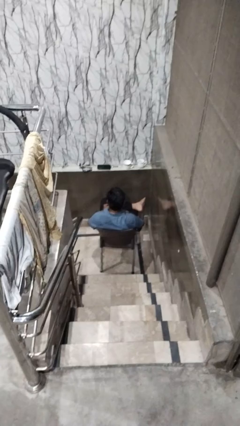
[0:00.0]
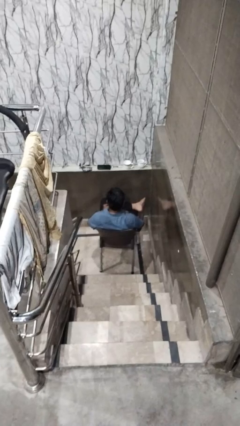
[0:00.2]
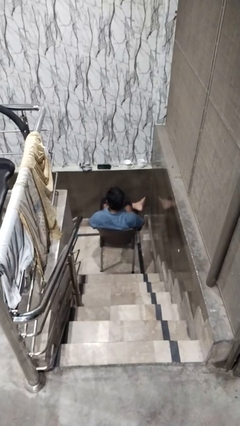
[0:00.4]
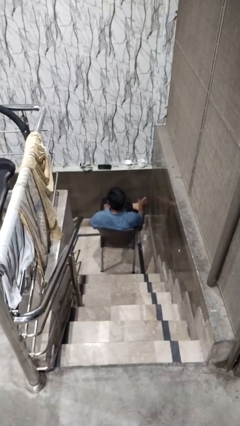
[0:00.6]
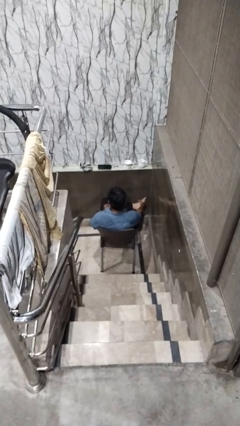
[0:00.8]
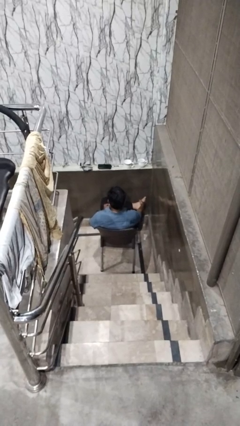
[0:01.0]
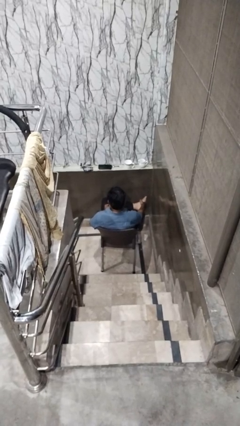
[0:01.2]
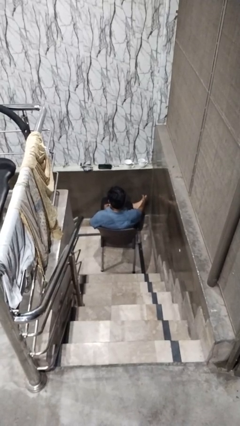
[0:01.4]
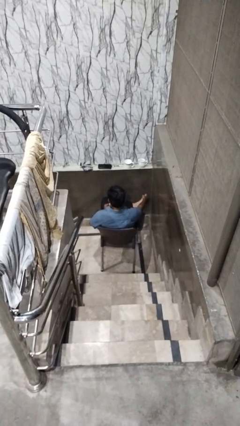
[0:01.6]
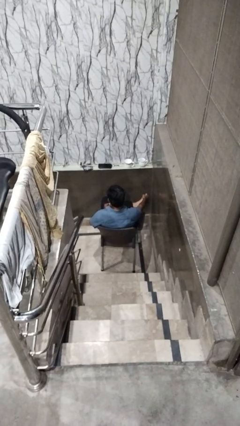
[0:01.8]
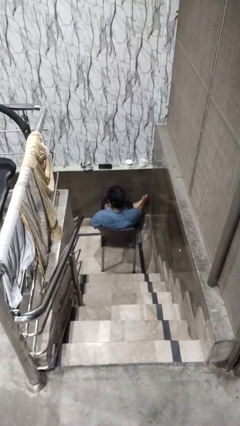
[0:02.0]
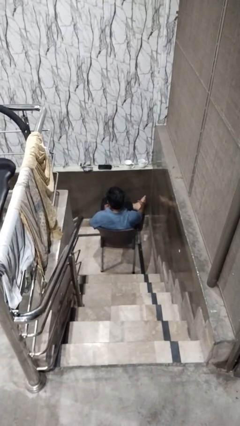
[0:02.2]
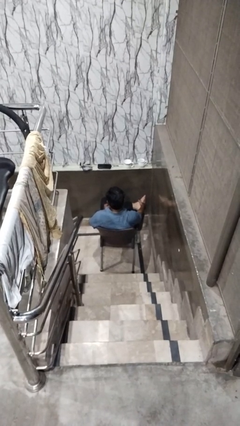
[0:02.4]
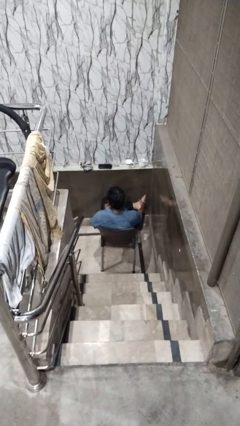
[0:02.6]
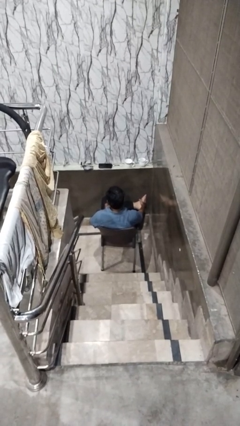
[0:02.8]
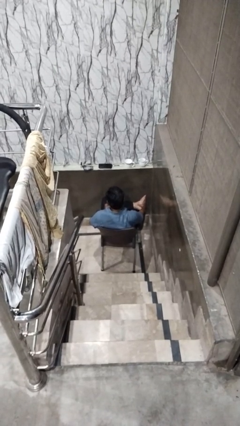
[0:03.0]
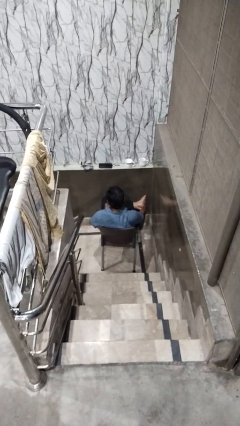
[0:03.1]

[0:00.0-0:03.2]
person rubs foot

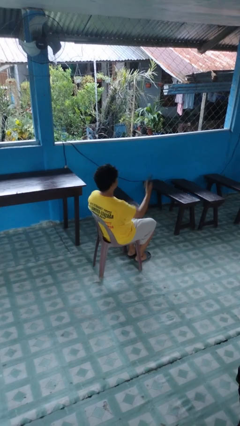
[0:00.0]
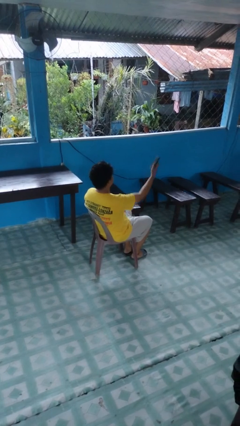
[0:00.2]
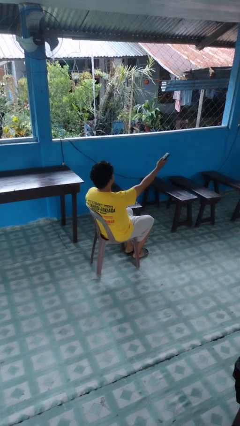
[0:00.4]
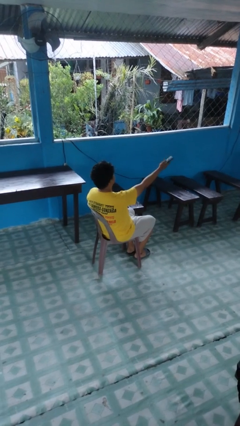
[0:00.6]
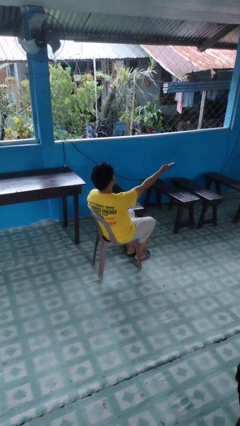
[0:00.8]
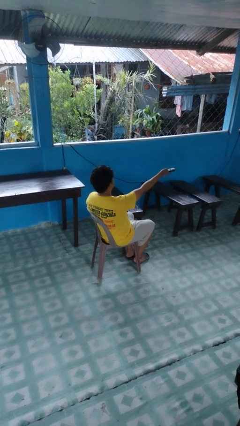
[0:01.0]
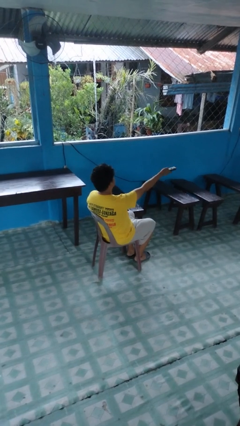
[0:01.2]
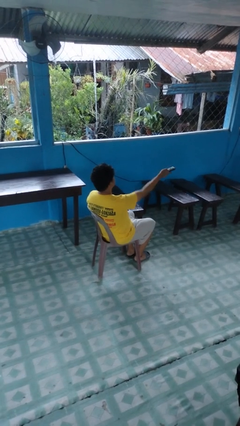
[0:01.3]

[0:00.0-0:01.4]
person uses television remote

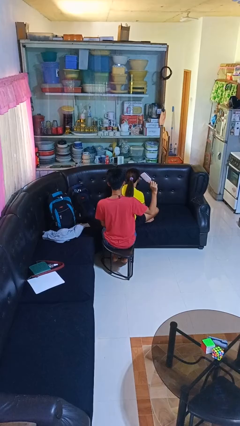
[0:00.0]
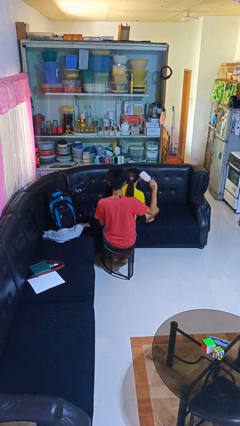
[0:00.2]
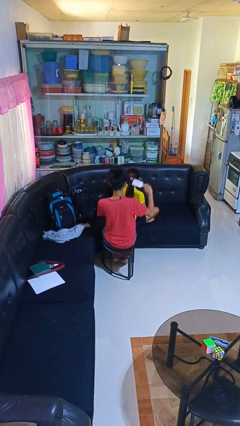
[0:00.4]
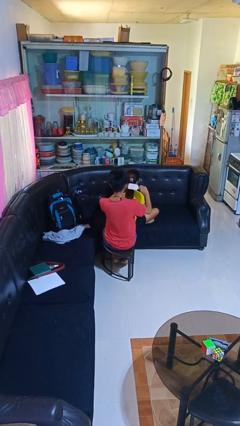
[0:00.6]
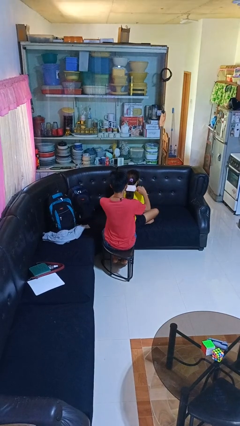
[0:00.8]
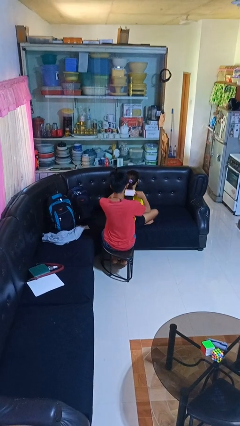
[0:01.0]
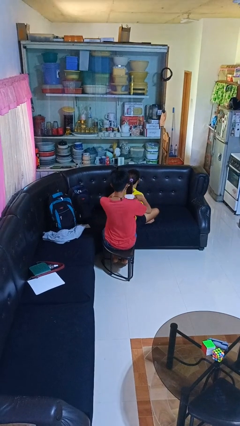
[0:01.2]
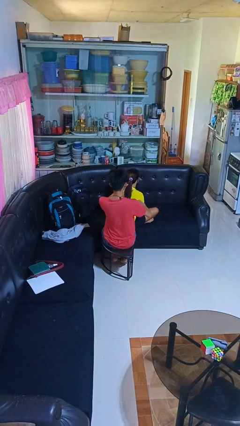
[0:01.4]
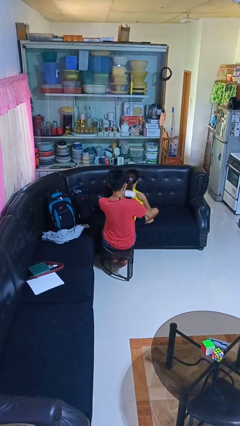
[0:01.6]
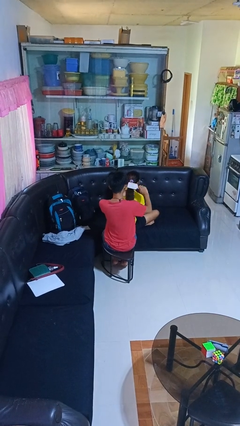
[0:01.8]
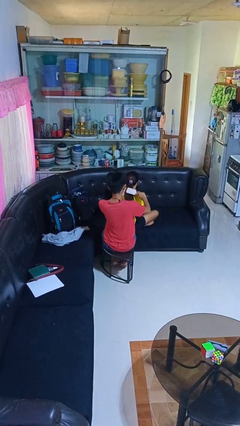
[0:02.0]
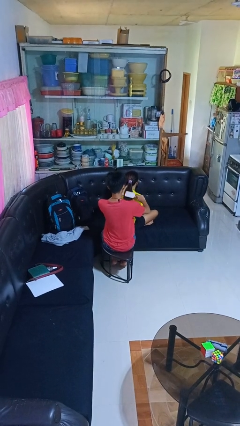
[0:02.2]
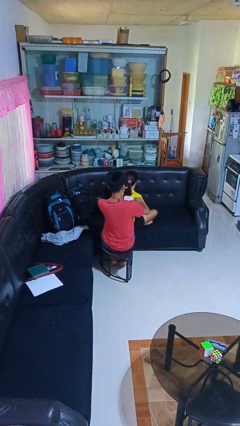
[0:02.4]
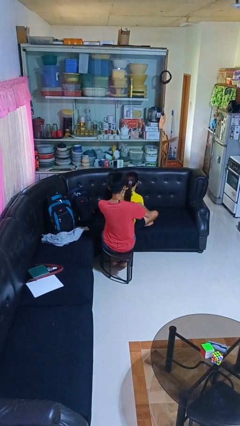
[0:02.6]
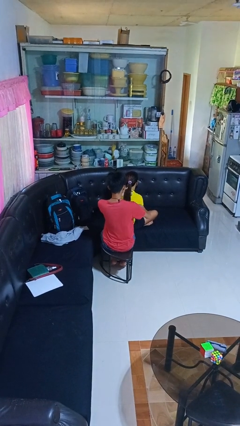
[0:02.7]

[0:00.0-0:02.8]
person brushes hair of person

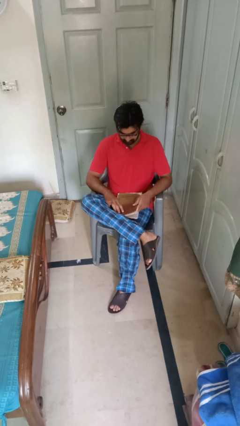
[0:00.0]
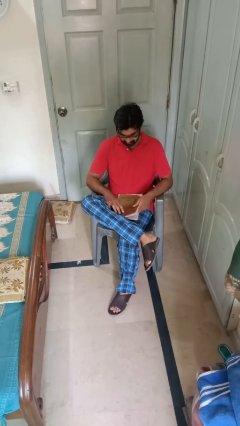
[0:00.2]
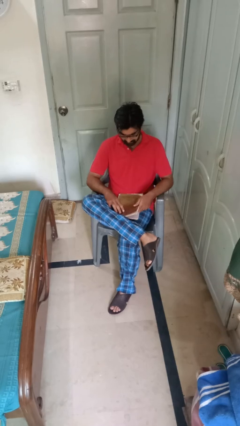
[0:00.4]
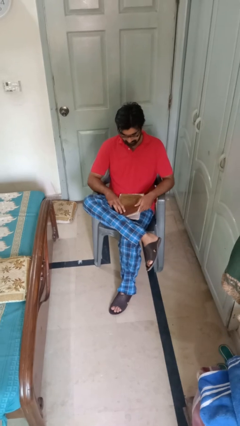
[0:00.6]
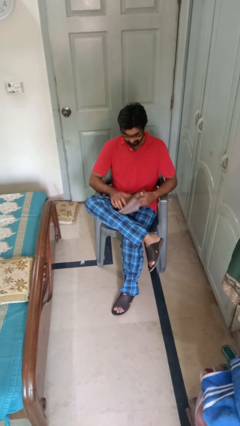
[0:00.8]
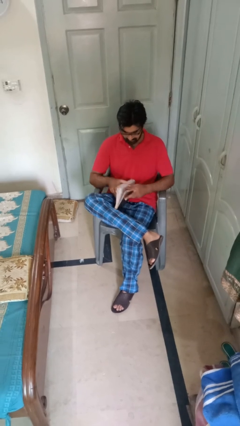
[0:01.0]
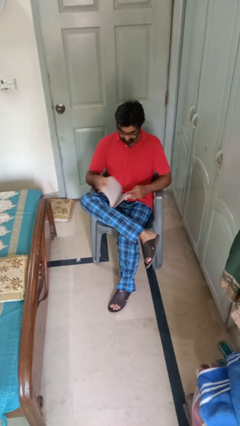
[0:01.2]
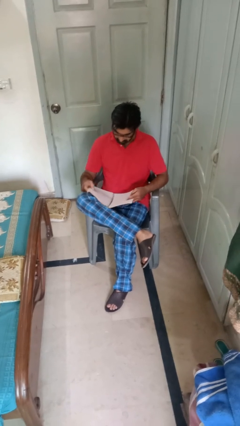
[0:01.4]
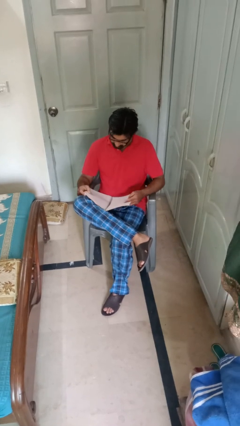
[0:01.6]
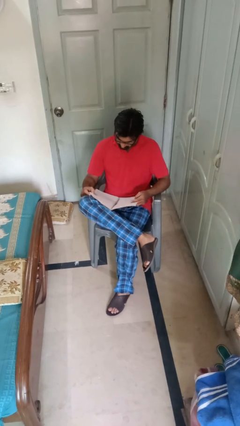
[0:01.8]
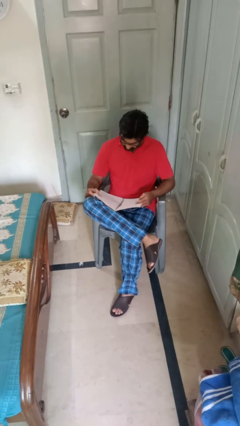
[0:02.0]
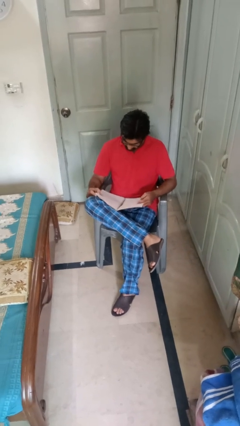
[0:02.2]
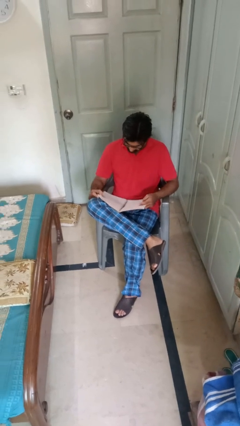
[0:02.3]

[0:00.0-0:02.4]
person reads magazine

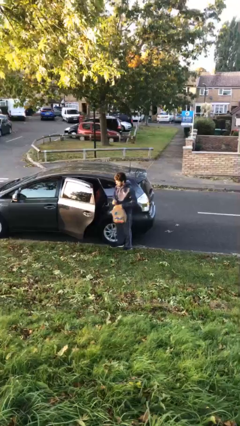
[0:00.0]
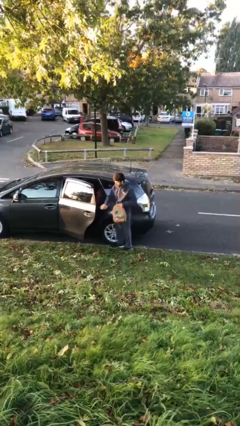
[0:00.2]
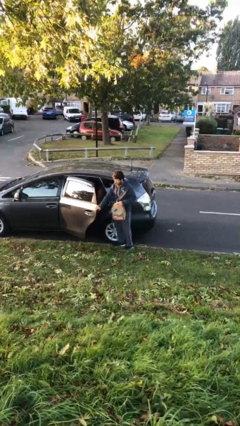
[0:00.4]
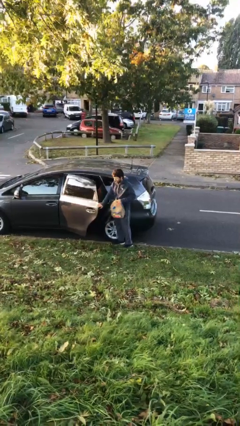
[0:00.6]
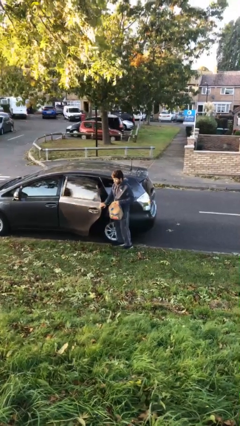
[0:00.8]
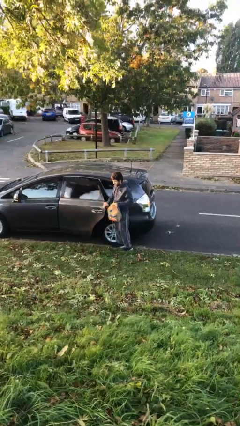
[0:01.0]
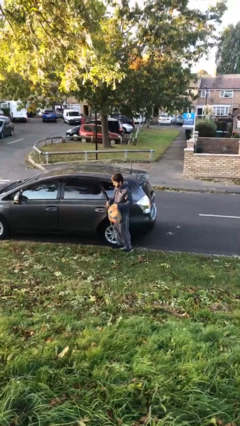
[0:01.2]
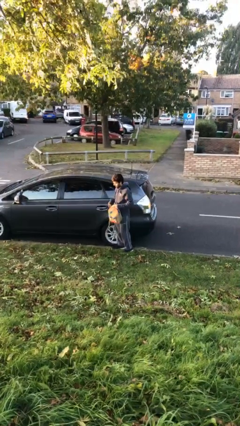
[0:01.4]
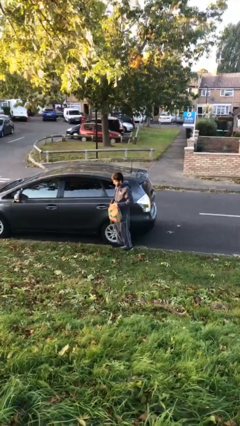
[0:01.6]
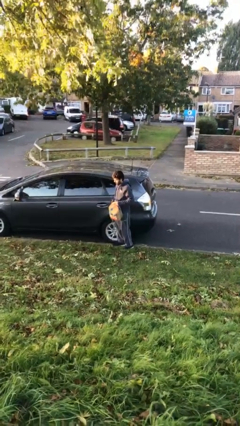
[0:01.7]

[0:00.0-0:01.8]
person closes car door

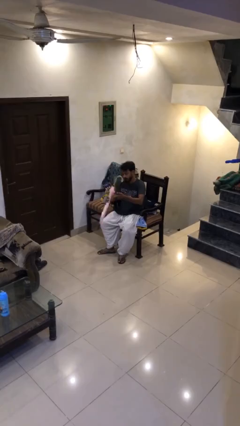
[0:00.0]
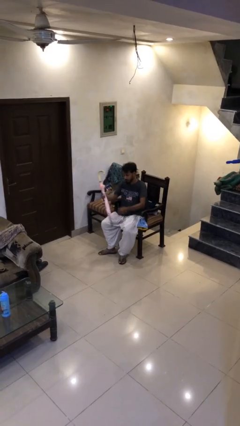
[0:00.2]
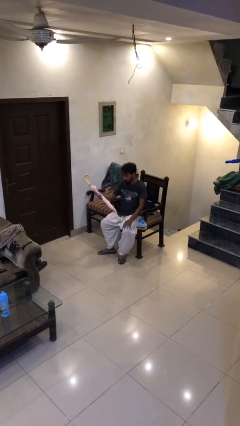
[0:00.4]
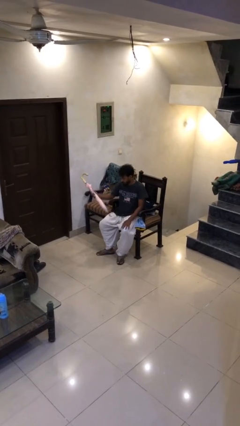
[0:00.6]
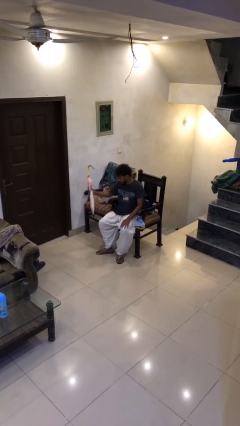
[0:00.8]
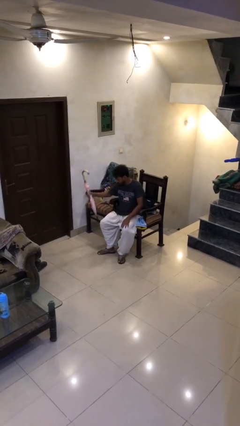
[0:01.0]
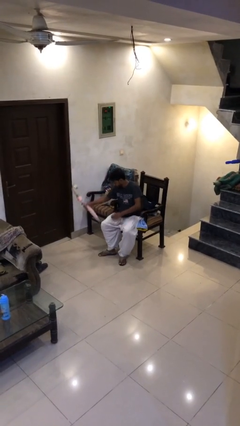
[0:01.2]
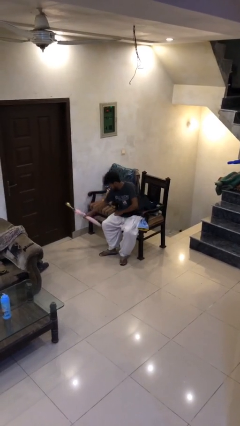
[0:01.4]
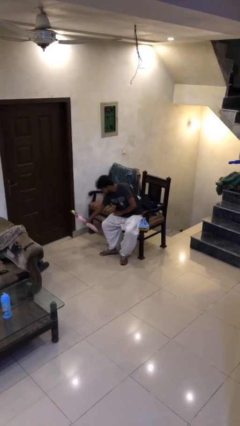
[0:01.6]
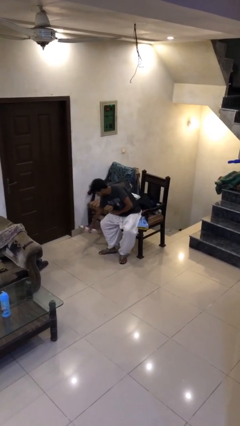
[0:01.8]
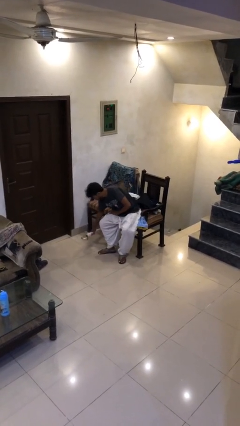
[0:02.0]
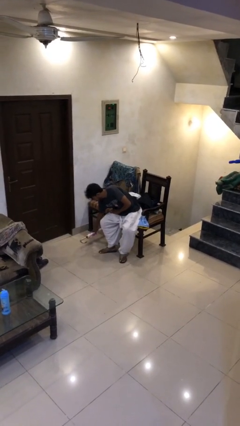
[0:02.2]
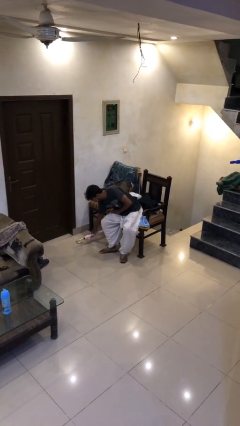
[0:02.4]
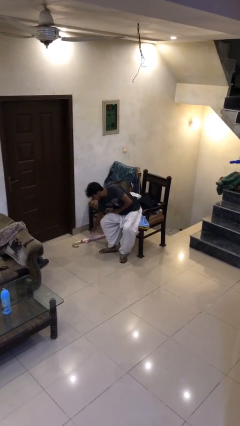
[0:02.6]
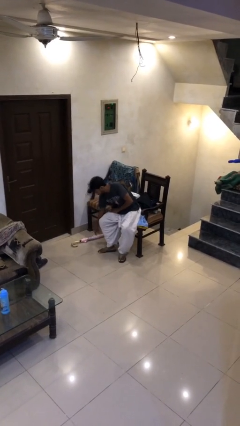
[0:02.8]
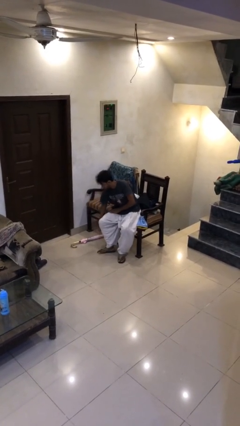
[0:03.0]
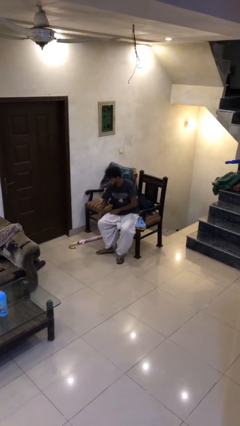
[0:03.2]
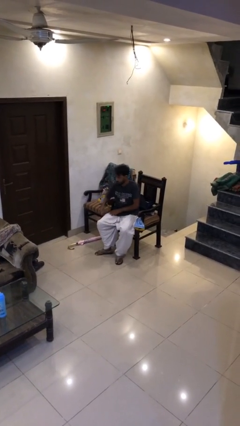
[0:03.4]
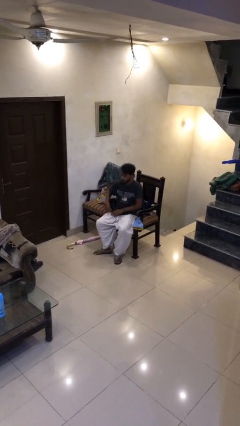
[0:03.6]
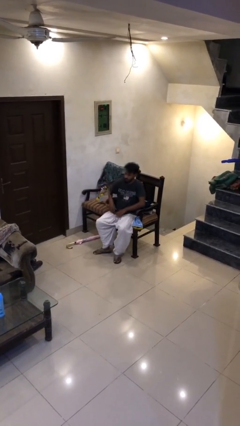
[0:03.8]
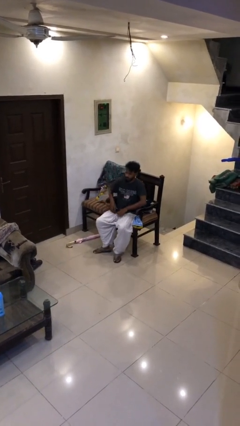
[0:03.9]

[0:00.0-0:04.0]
person puts down object on floor

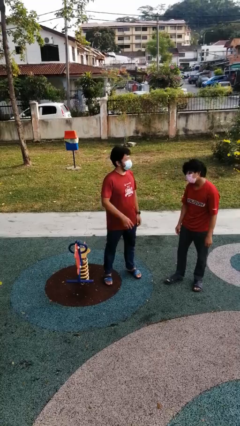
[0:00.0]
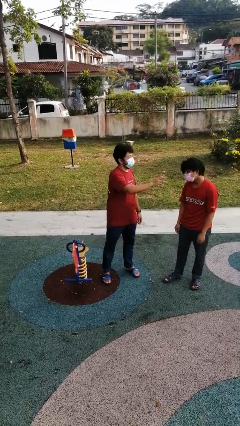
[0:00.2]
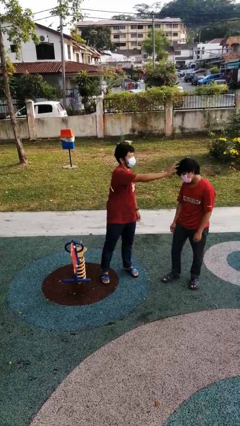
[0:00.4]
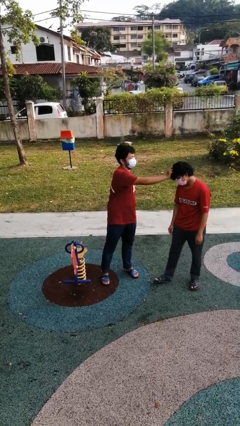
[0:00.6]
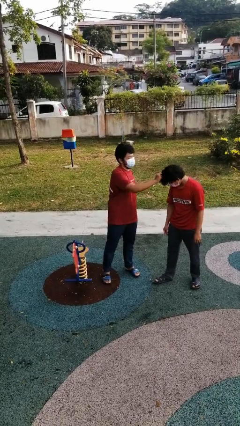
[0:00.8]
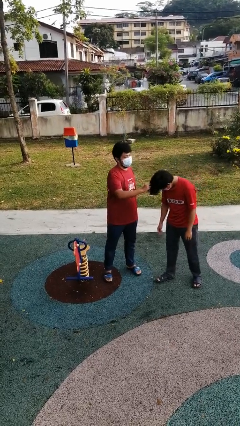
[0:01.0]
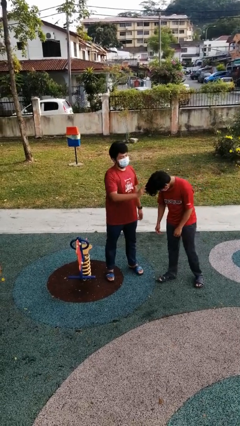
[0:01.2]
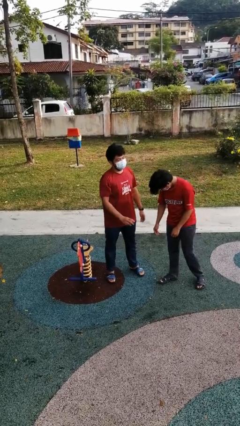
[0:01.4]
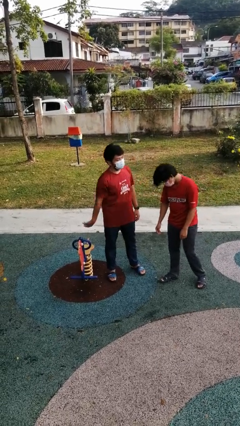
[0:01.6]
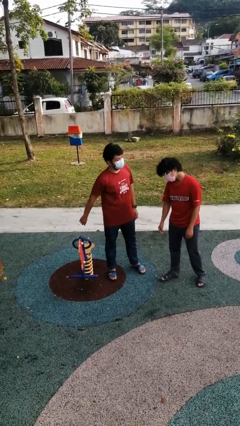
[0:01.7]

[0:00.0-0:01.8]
person grabs person by hair
